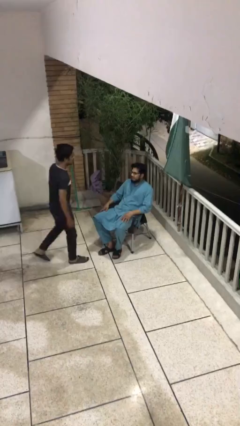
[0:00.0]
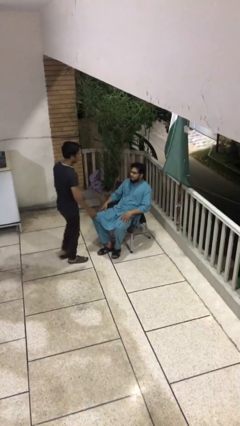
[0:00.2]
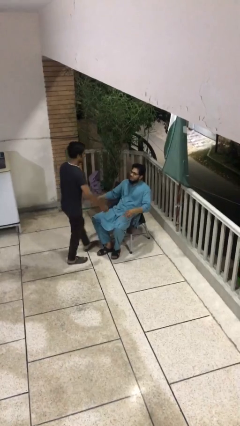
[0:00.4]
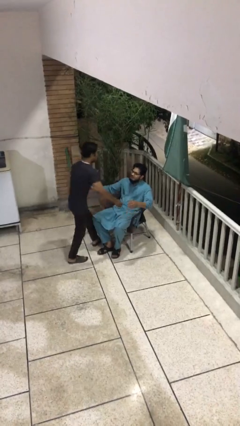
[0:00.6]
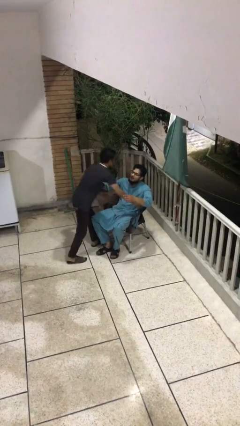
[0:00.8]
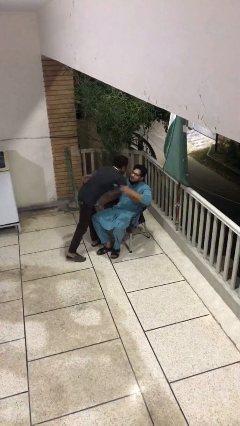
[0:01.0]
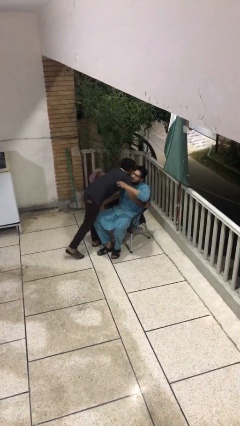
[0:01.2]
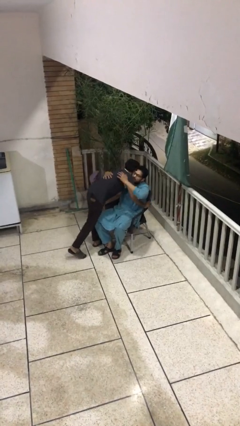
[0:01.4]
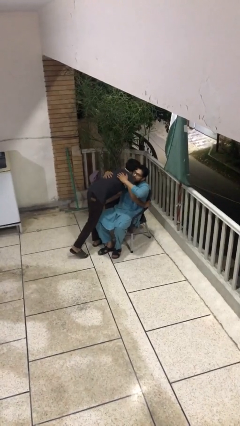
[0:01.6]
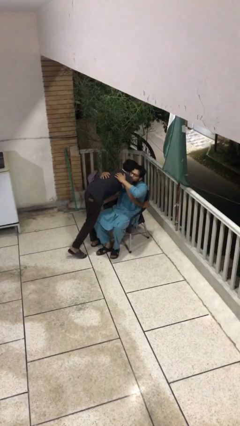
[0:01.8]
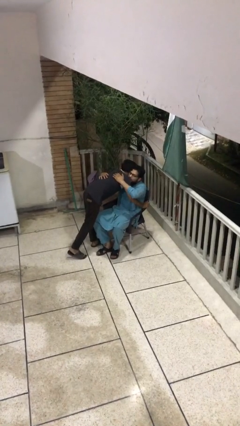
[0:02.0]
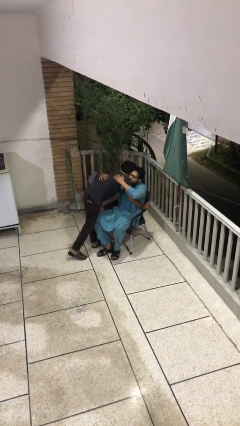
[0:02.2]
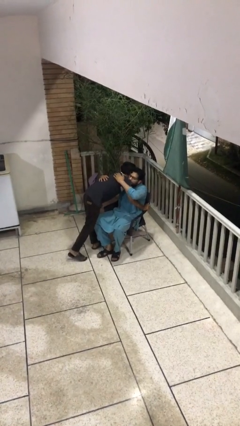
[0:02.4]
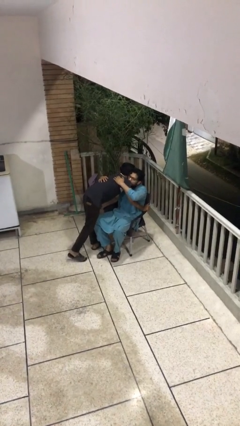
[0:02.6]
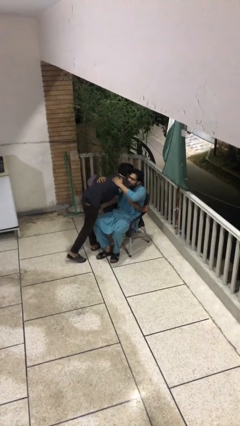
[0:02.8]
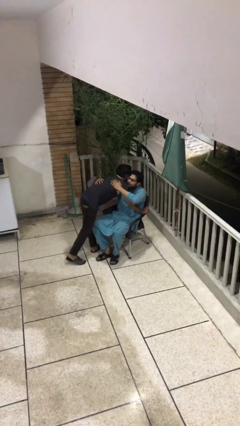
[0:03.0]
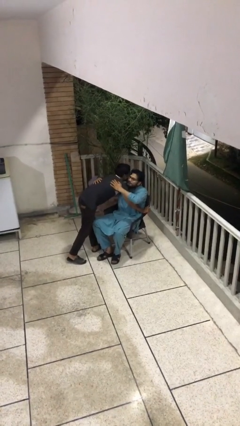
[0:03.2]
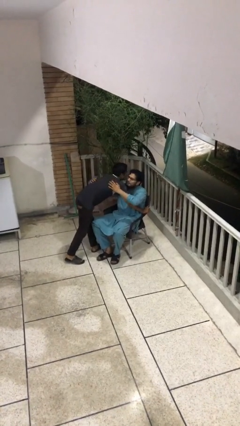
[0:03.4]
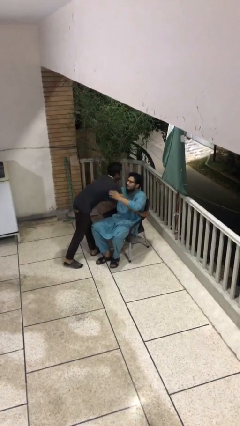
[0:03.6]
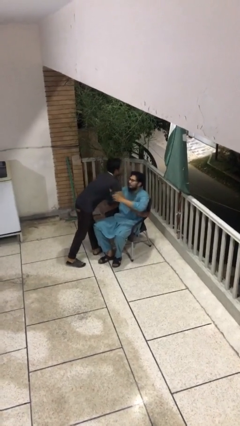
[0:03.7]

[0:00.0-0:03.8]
person embraces person

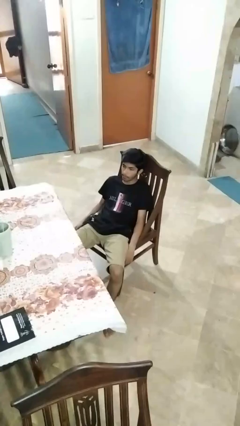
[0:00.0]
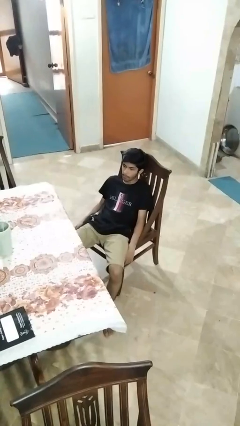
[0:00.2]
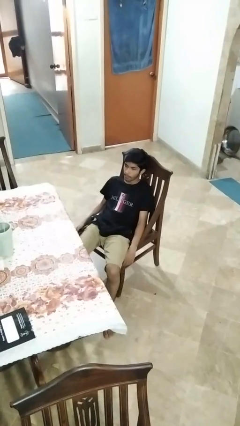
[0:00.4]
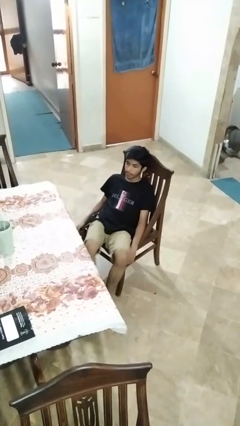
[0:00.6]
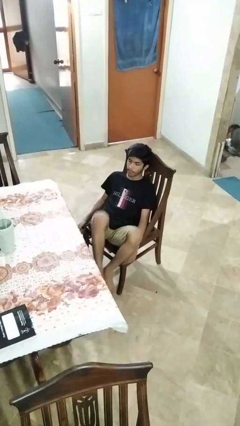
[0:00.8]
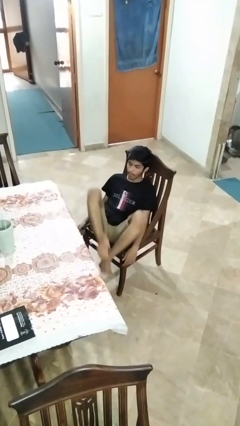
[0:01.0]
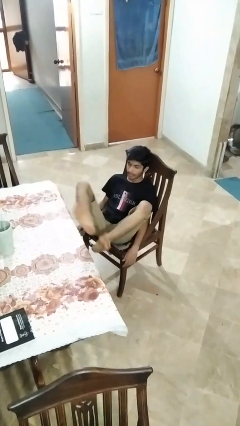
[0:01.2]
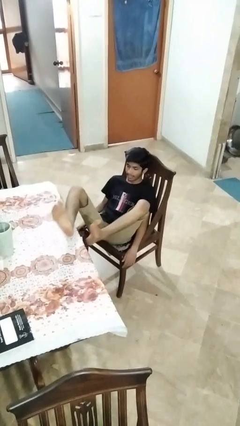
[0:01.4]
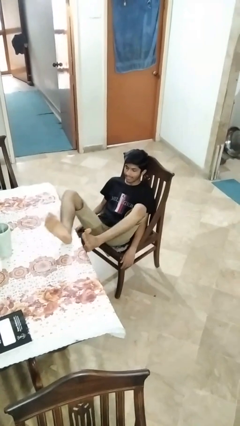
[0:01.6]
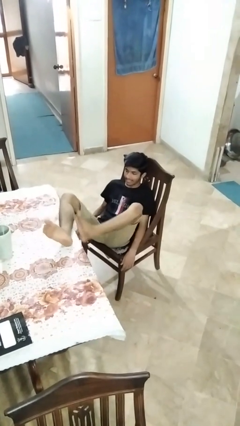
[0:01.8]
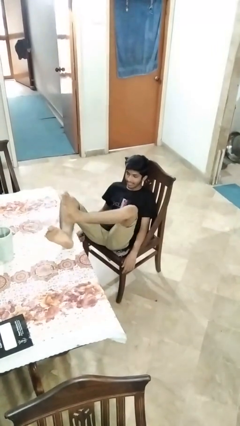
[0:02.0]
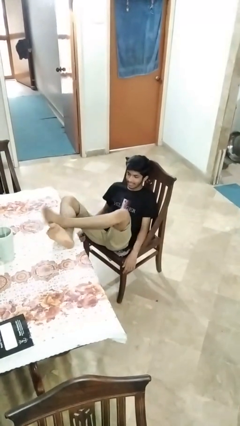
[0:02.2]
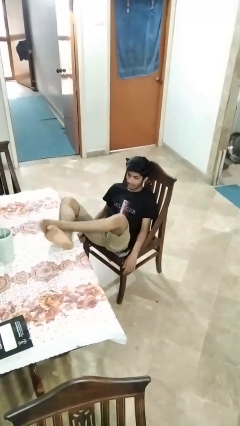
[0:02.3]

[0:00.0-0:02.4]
person puts feet up

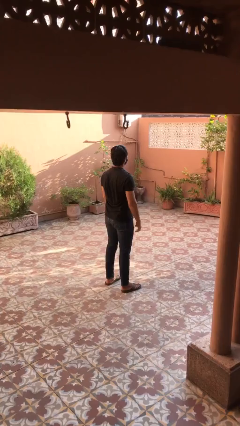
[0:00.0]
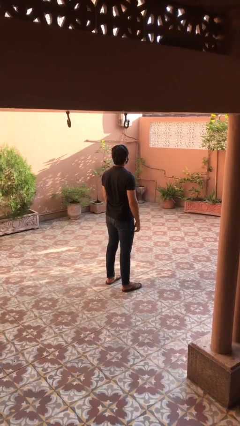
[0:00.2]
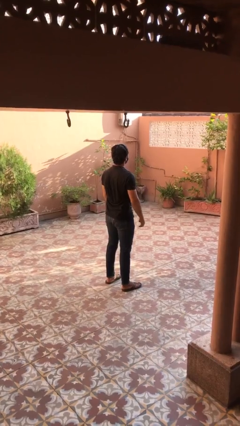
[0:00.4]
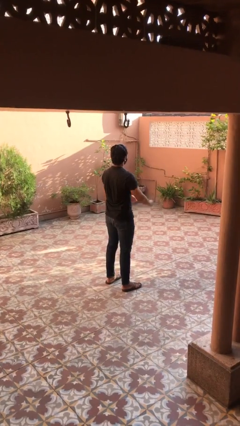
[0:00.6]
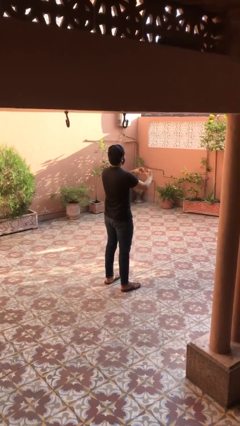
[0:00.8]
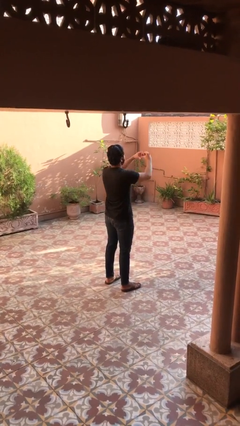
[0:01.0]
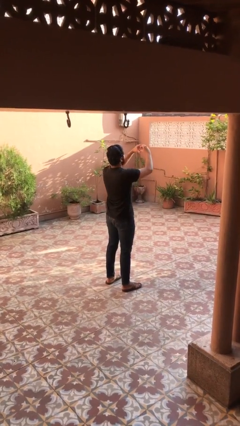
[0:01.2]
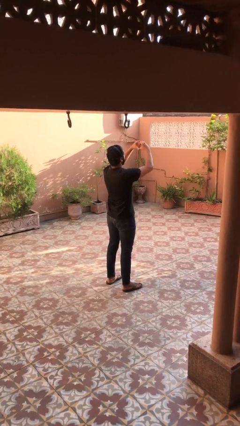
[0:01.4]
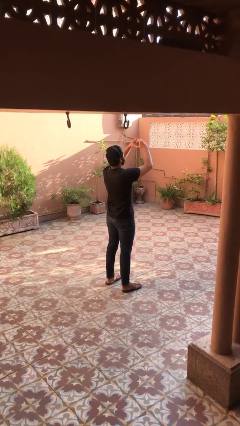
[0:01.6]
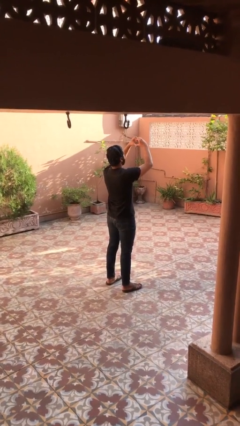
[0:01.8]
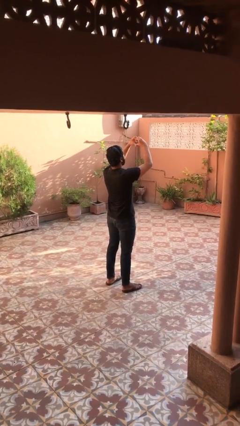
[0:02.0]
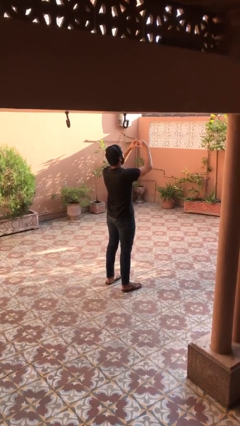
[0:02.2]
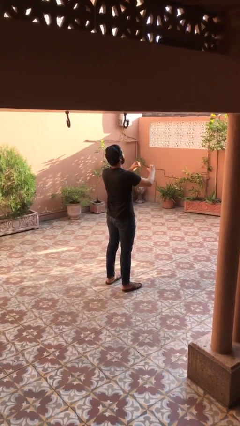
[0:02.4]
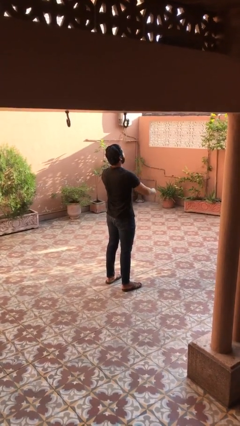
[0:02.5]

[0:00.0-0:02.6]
person gestures heart

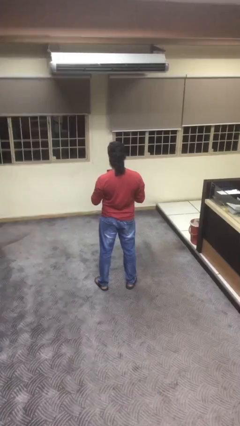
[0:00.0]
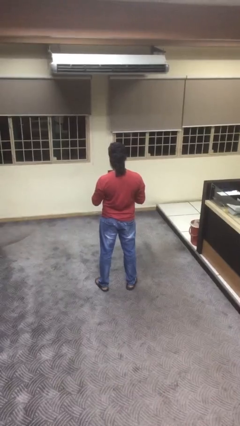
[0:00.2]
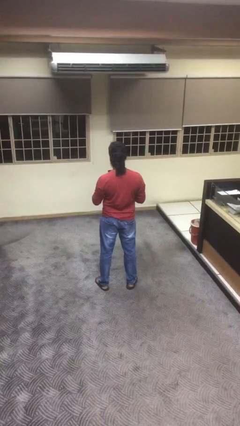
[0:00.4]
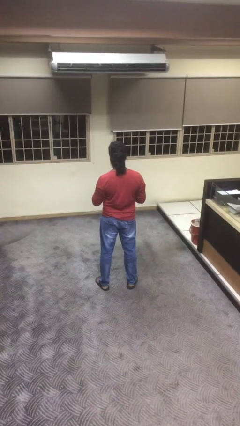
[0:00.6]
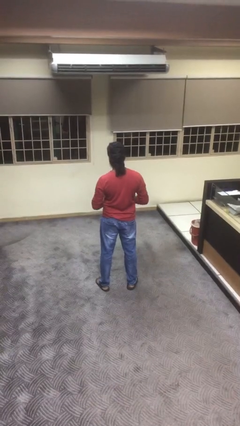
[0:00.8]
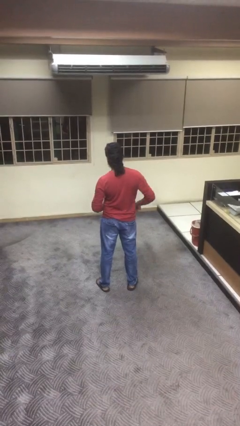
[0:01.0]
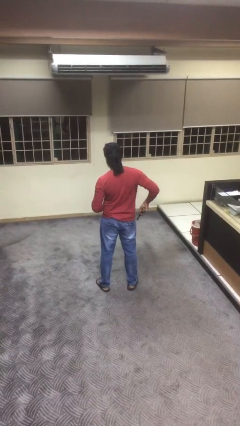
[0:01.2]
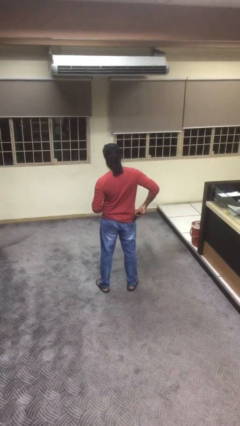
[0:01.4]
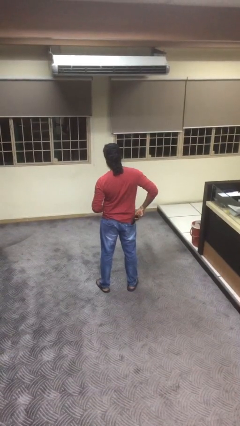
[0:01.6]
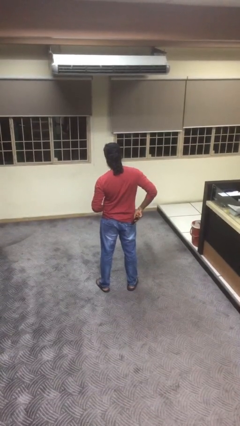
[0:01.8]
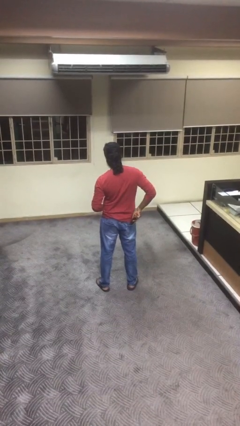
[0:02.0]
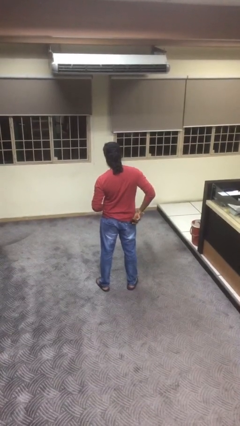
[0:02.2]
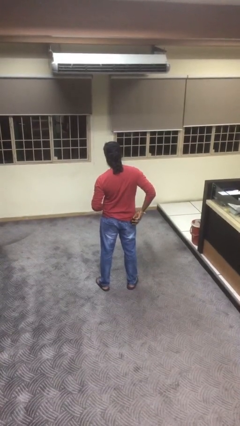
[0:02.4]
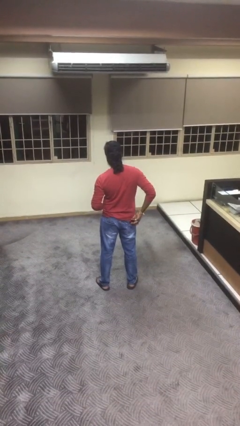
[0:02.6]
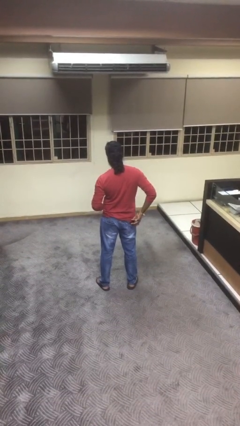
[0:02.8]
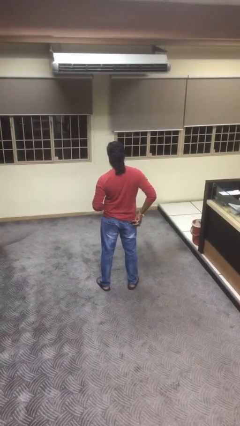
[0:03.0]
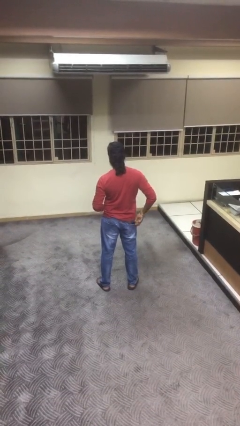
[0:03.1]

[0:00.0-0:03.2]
person puts phone into pocket

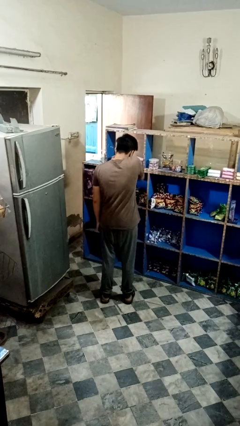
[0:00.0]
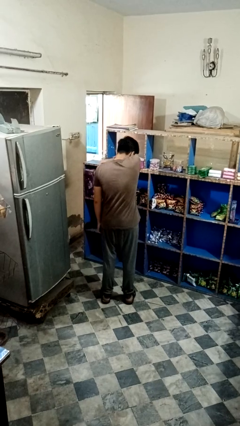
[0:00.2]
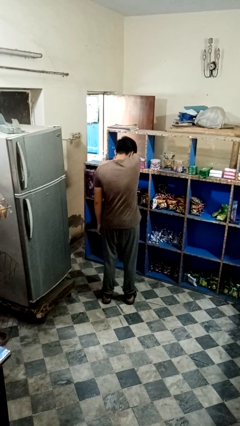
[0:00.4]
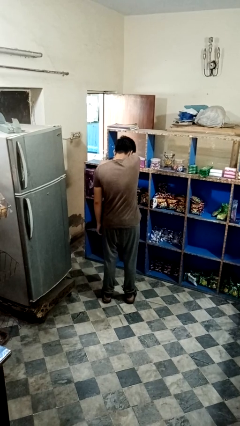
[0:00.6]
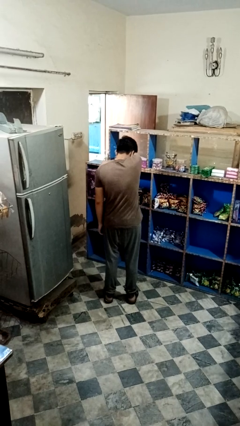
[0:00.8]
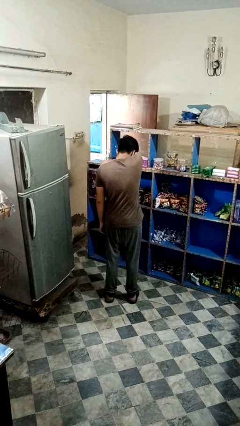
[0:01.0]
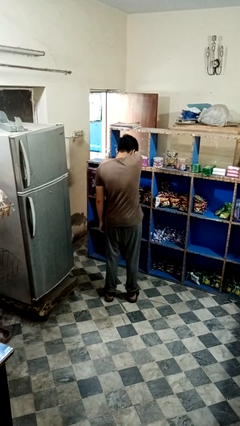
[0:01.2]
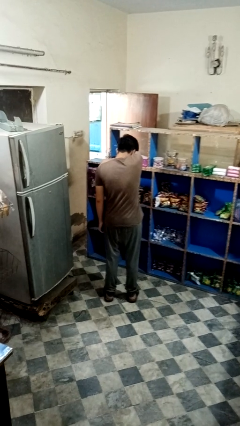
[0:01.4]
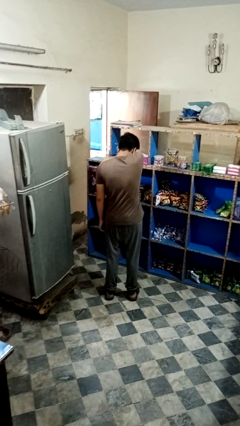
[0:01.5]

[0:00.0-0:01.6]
person sneezes into arm

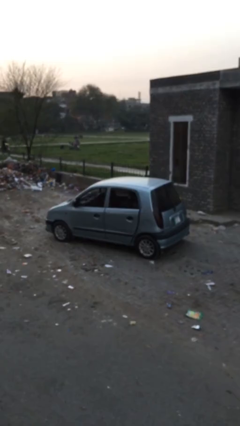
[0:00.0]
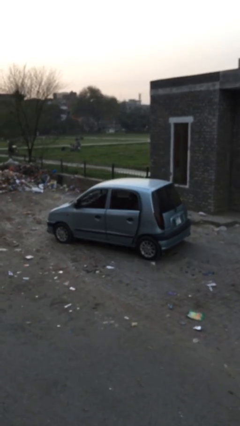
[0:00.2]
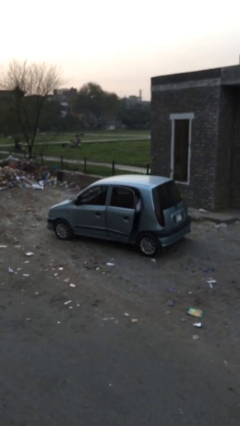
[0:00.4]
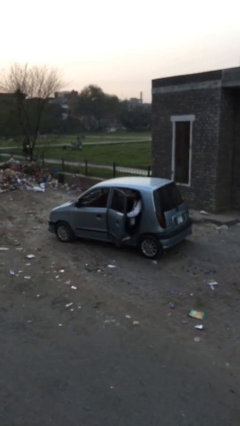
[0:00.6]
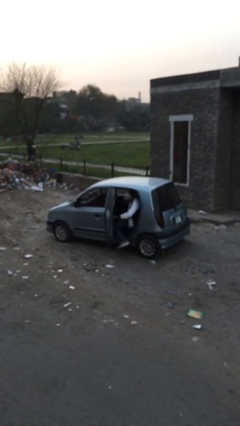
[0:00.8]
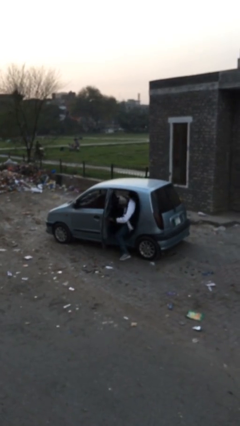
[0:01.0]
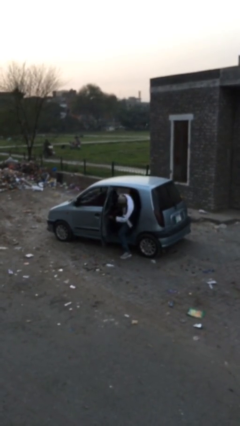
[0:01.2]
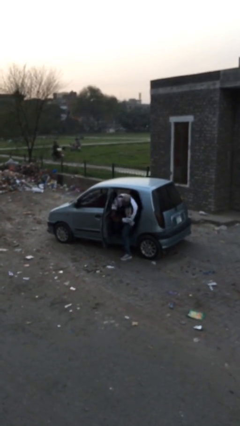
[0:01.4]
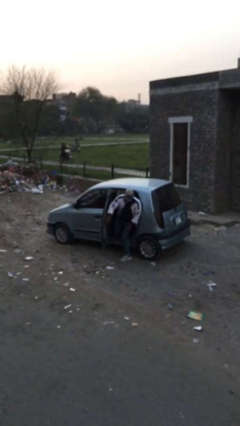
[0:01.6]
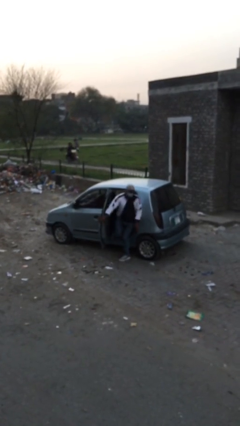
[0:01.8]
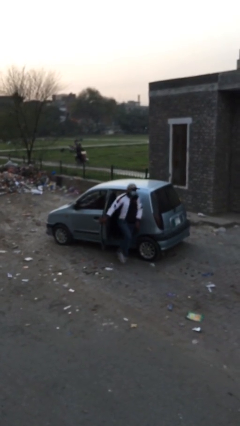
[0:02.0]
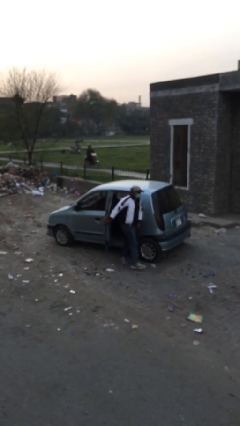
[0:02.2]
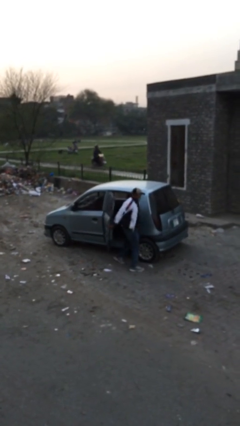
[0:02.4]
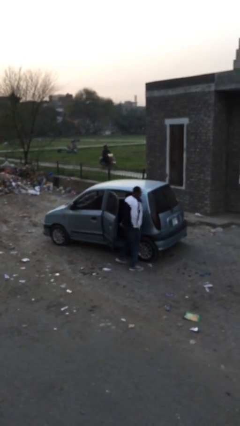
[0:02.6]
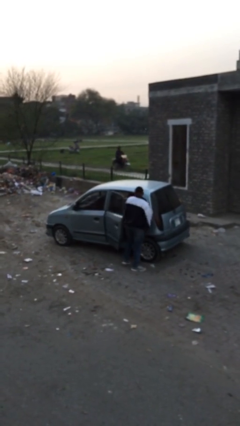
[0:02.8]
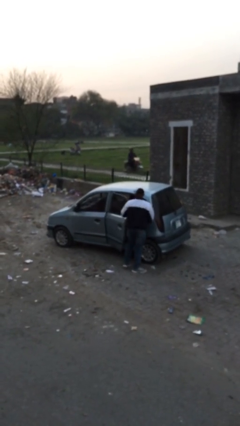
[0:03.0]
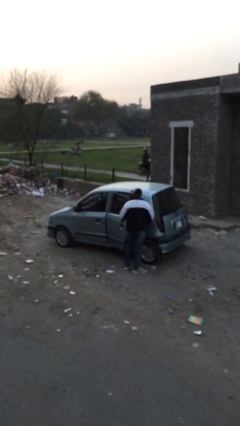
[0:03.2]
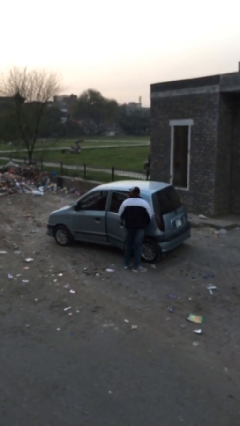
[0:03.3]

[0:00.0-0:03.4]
car drops off person

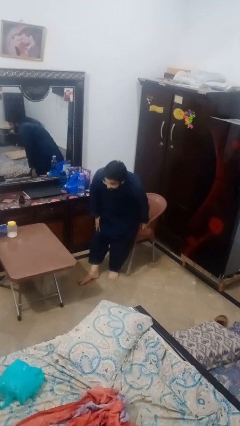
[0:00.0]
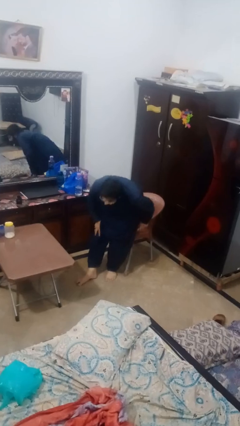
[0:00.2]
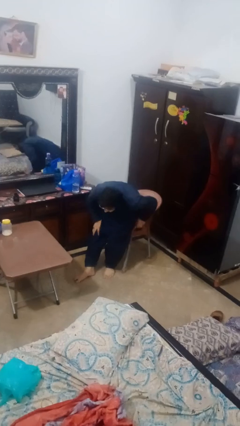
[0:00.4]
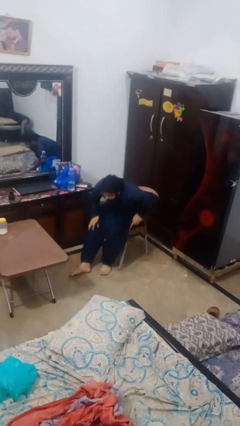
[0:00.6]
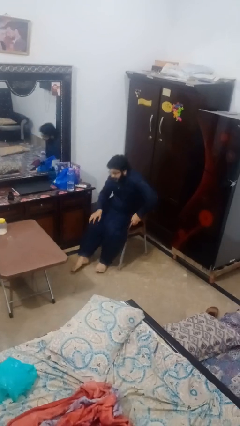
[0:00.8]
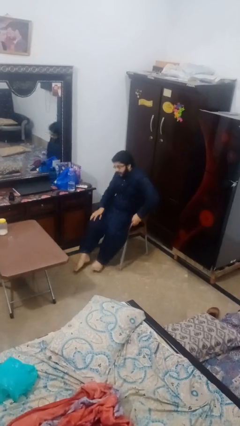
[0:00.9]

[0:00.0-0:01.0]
person sits down
